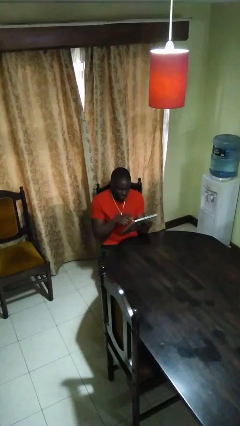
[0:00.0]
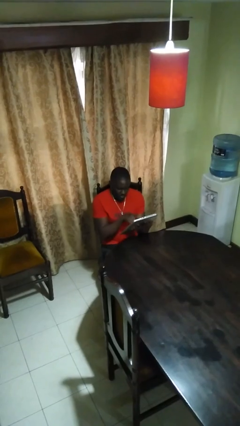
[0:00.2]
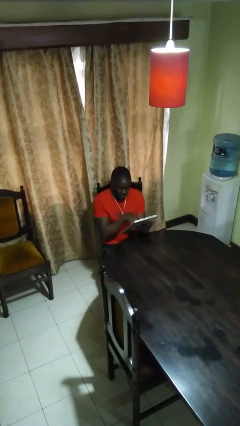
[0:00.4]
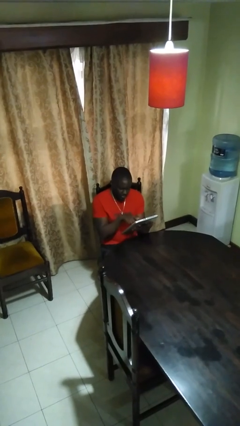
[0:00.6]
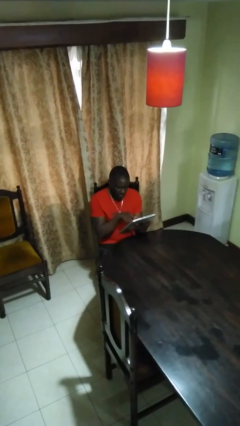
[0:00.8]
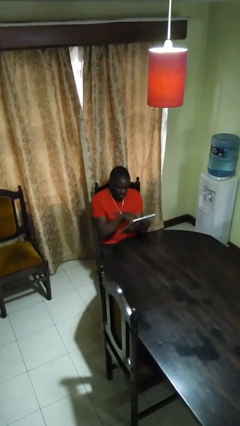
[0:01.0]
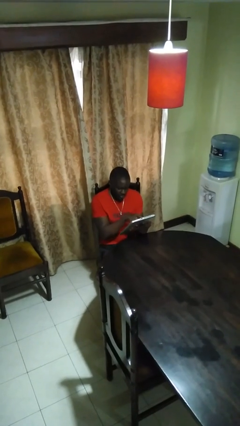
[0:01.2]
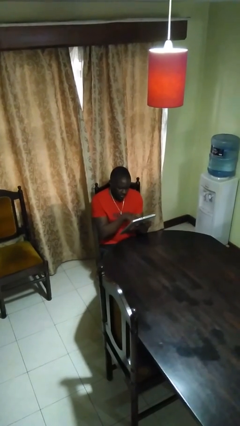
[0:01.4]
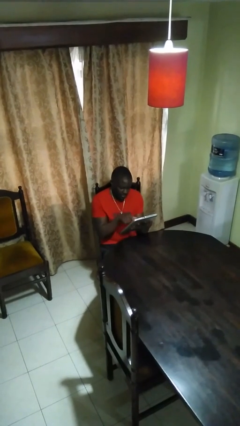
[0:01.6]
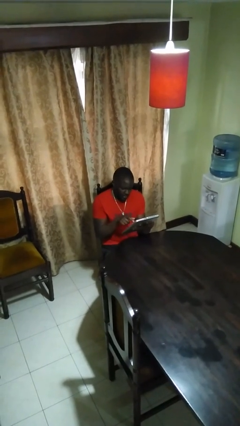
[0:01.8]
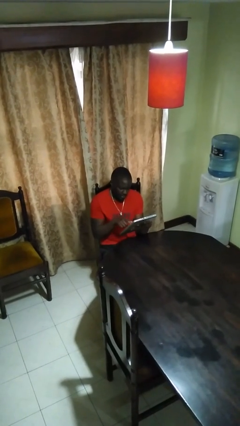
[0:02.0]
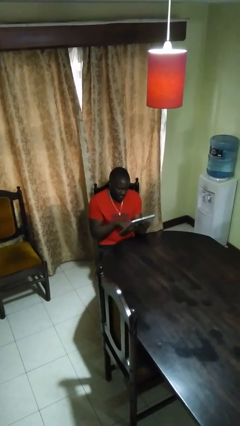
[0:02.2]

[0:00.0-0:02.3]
person interacts with tablet

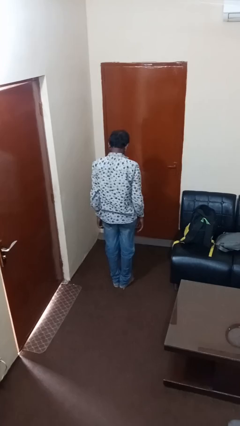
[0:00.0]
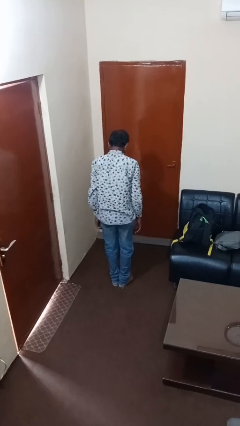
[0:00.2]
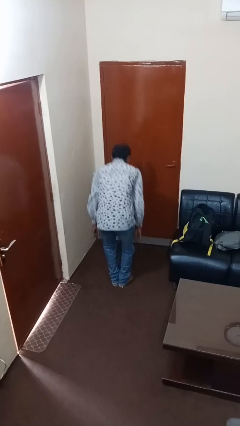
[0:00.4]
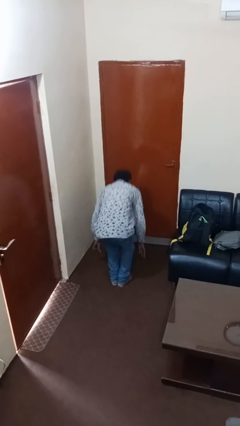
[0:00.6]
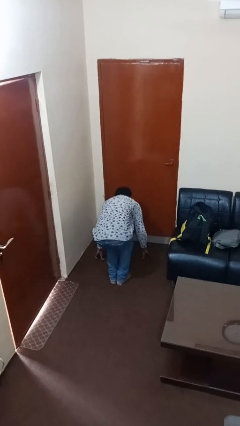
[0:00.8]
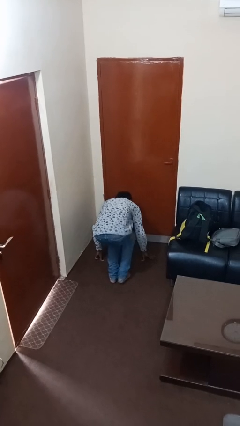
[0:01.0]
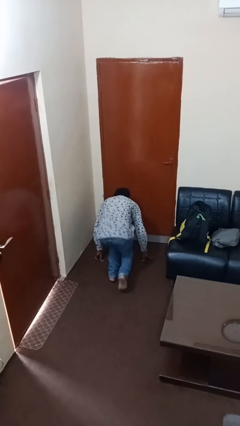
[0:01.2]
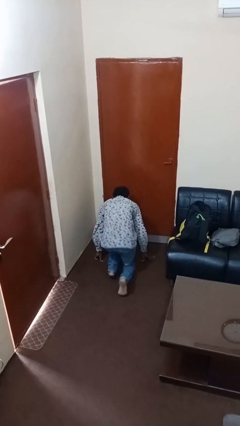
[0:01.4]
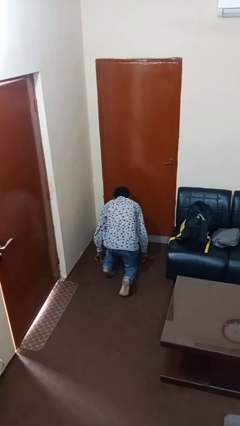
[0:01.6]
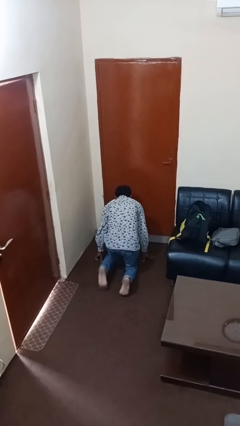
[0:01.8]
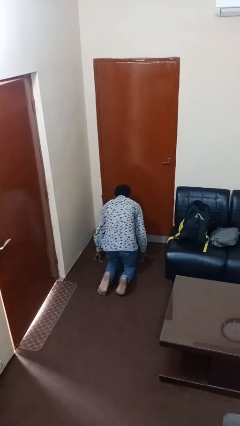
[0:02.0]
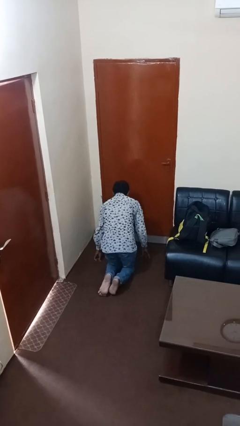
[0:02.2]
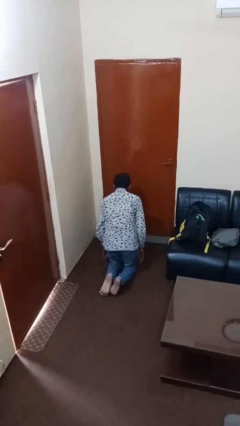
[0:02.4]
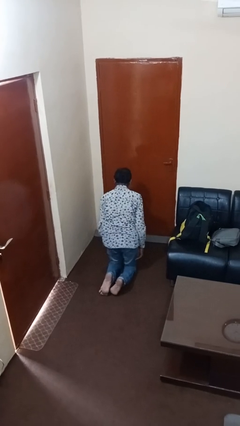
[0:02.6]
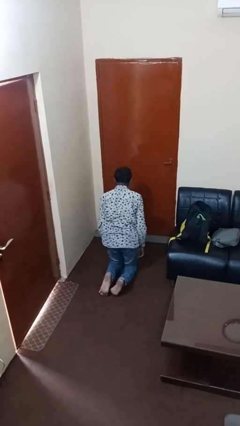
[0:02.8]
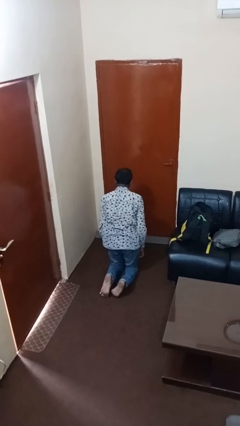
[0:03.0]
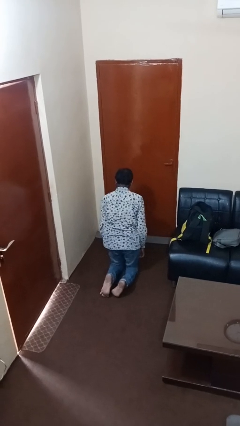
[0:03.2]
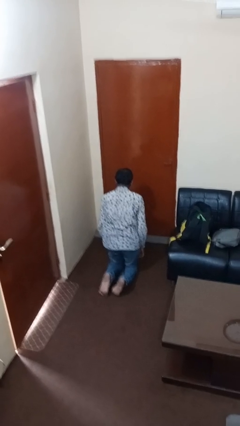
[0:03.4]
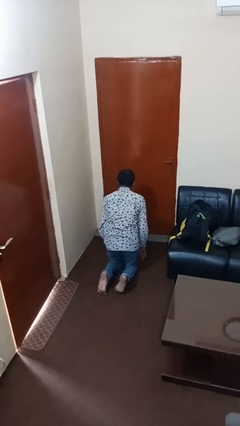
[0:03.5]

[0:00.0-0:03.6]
person kneels

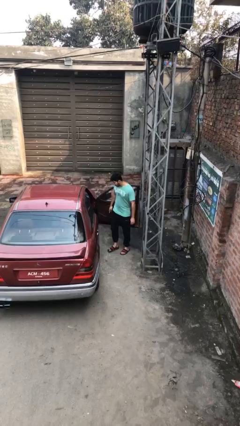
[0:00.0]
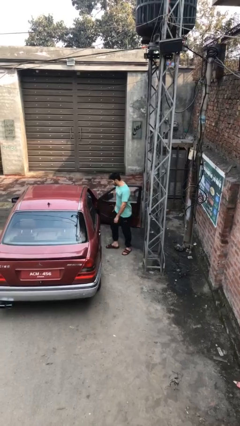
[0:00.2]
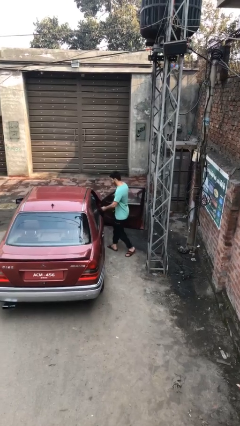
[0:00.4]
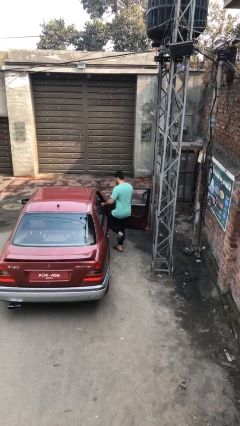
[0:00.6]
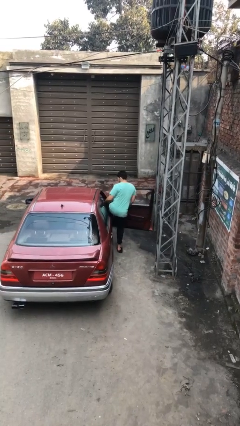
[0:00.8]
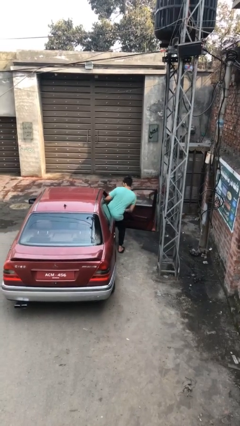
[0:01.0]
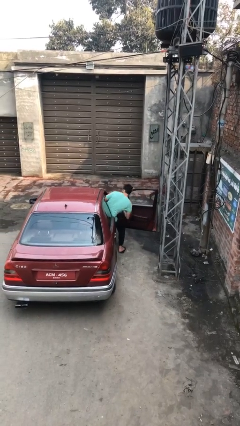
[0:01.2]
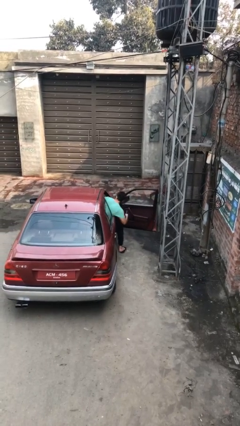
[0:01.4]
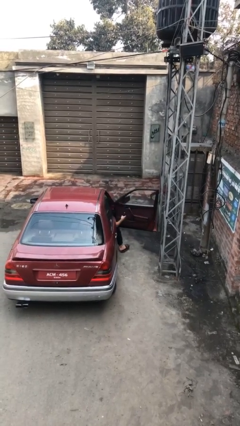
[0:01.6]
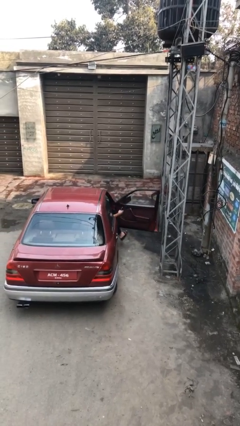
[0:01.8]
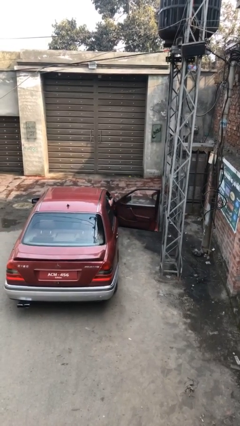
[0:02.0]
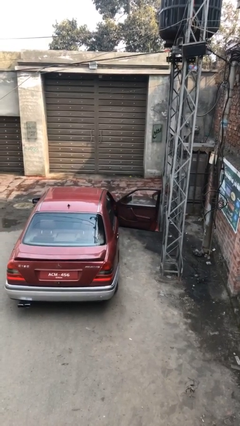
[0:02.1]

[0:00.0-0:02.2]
person enters car

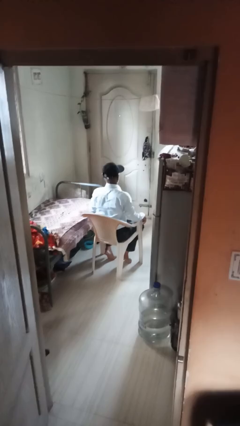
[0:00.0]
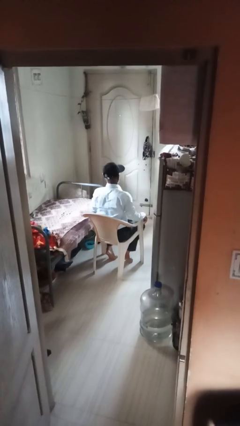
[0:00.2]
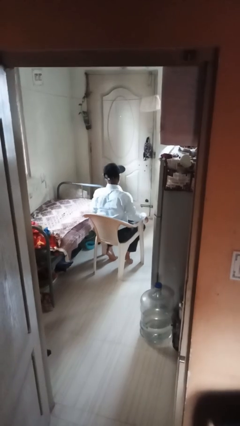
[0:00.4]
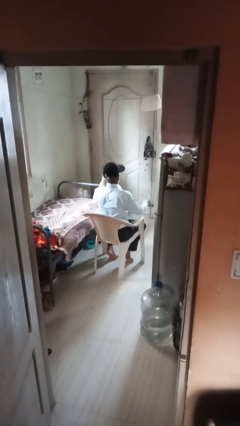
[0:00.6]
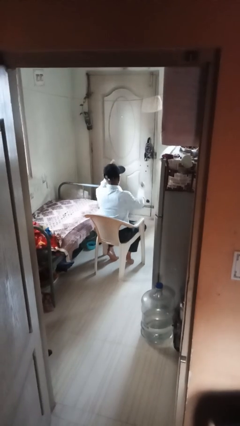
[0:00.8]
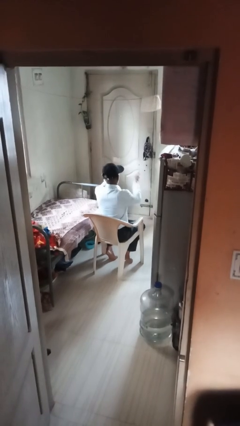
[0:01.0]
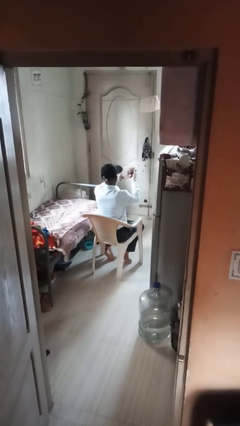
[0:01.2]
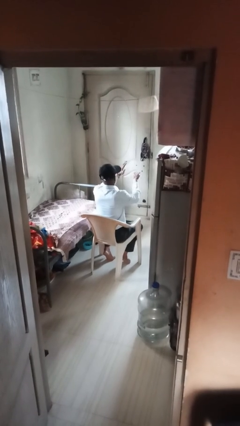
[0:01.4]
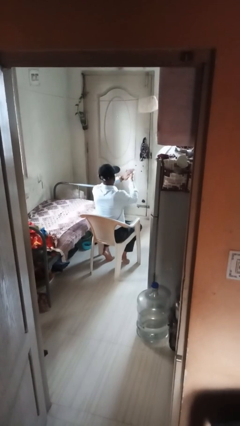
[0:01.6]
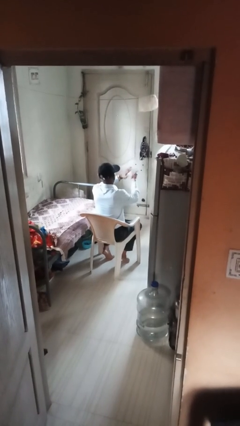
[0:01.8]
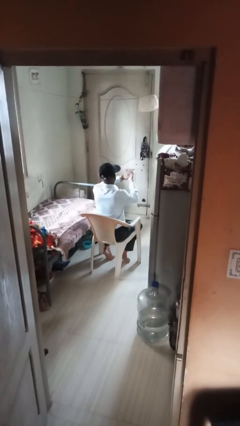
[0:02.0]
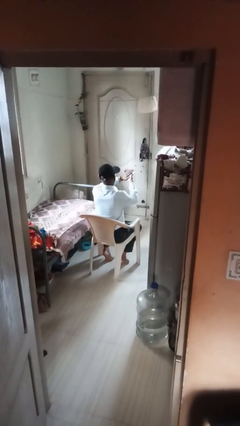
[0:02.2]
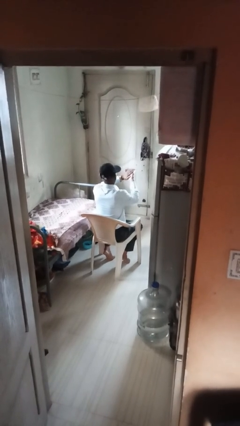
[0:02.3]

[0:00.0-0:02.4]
person claps hands

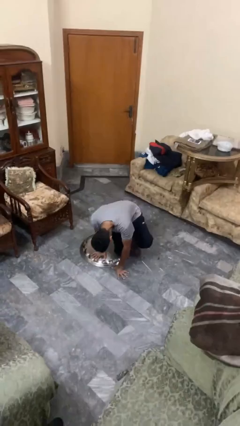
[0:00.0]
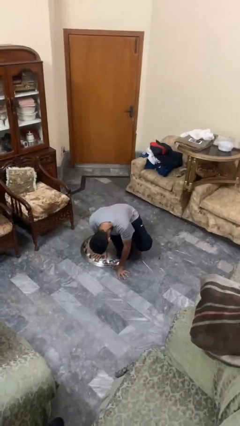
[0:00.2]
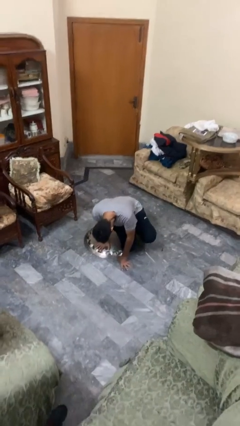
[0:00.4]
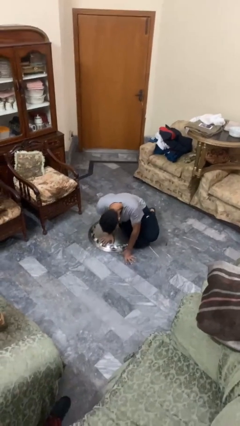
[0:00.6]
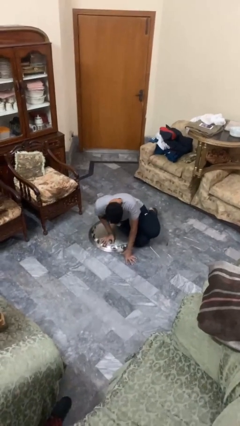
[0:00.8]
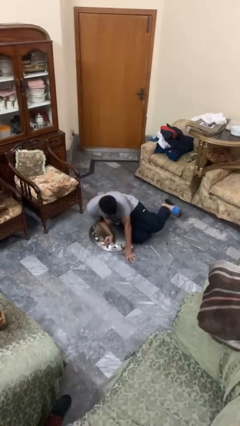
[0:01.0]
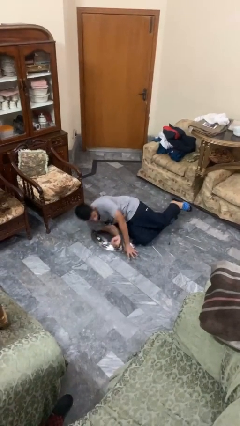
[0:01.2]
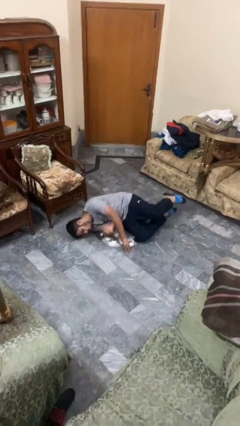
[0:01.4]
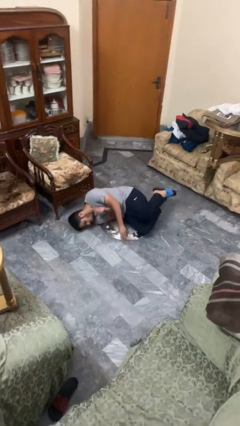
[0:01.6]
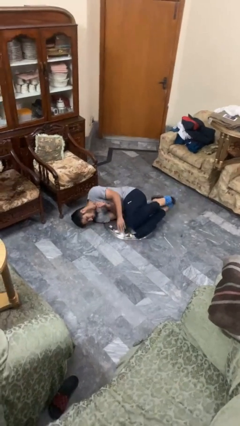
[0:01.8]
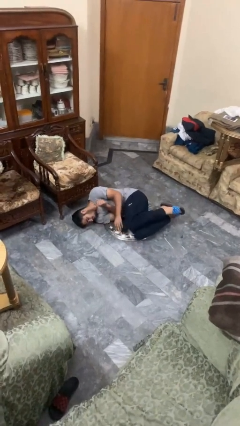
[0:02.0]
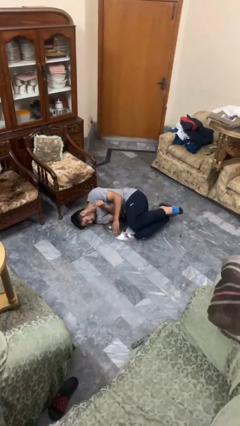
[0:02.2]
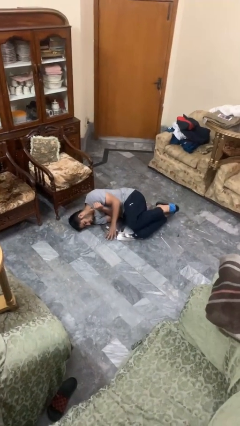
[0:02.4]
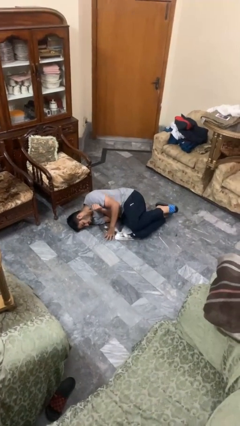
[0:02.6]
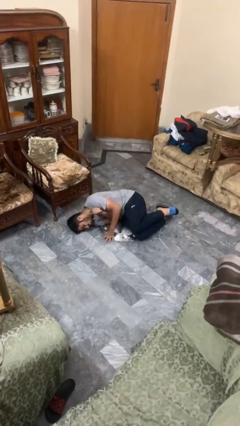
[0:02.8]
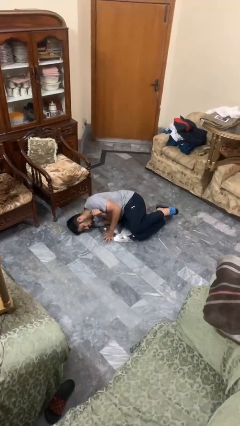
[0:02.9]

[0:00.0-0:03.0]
person lies down on floor

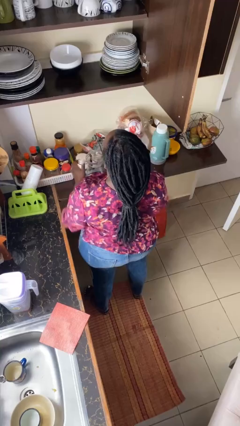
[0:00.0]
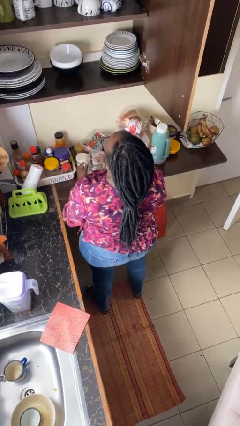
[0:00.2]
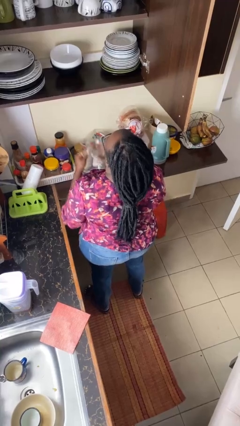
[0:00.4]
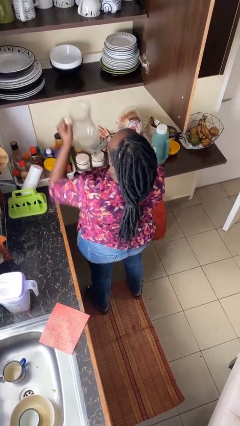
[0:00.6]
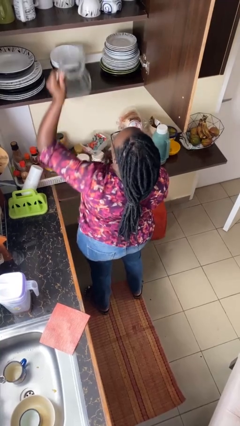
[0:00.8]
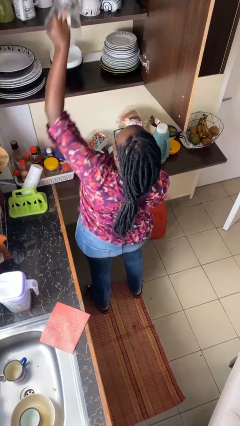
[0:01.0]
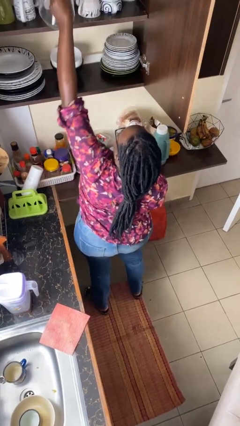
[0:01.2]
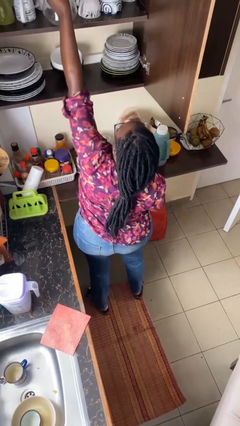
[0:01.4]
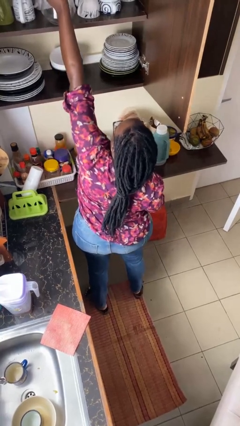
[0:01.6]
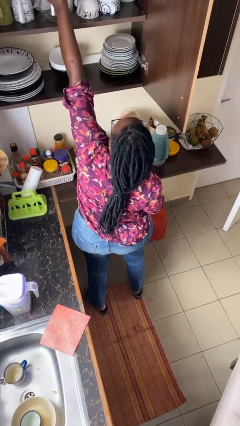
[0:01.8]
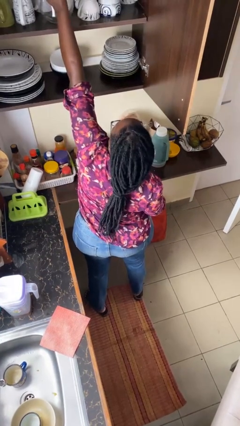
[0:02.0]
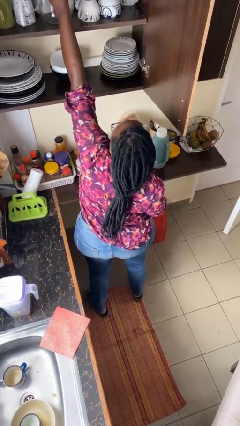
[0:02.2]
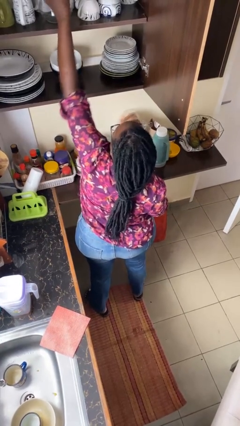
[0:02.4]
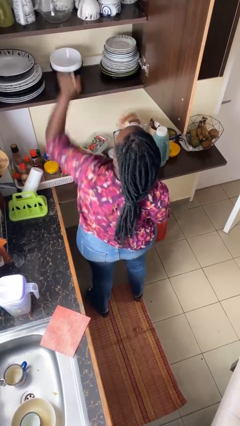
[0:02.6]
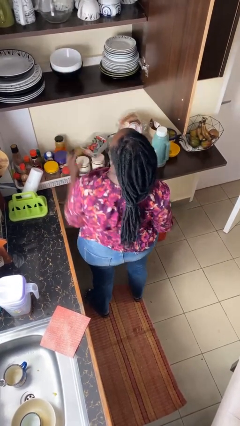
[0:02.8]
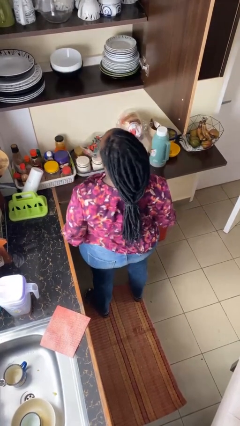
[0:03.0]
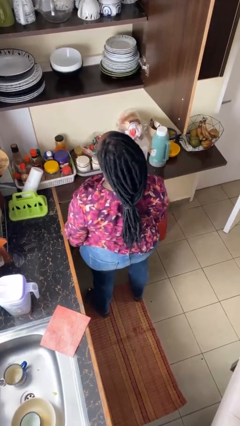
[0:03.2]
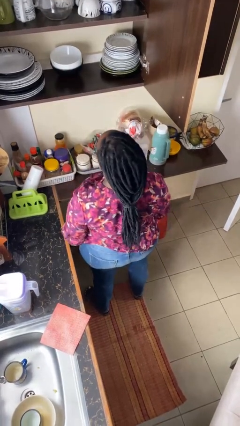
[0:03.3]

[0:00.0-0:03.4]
person puts object in cabinet

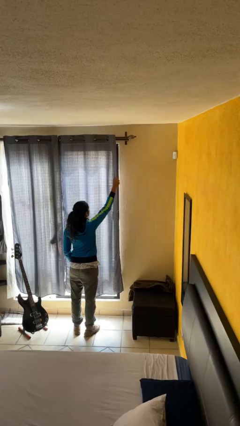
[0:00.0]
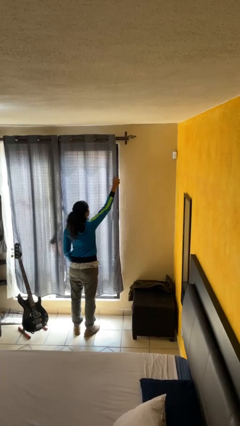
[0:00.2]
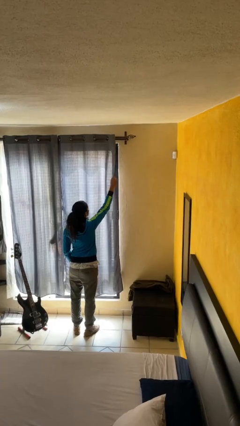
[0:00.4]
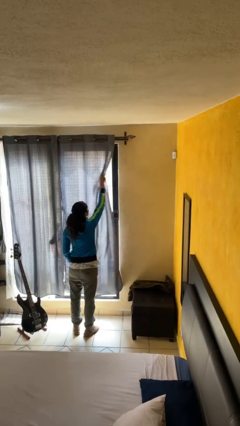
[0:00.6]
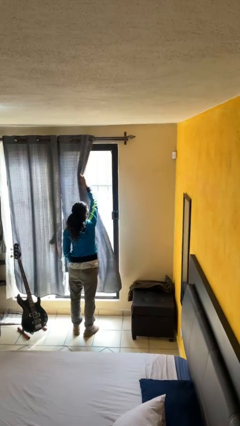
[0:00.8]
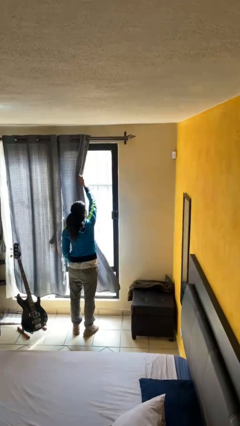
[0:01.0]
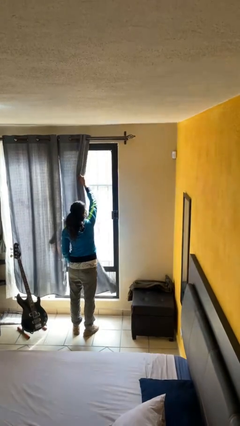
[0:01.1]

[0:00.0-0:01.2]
person opens curtains
